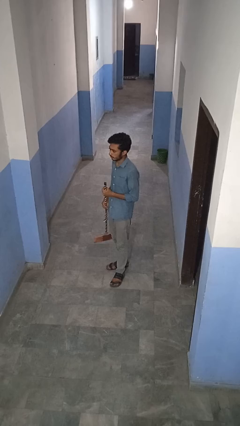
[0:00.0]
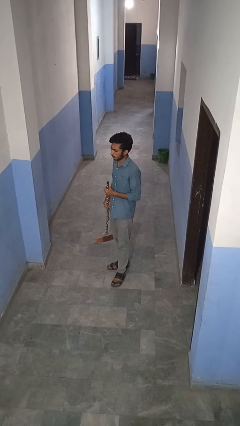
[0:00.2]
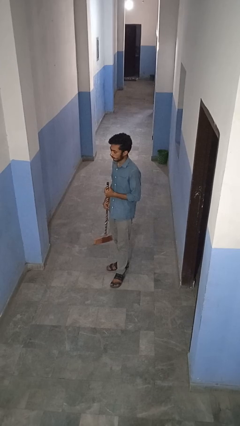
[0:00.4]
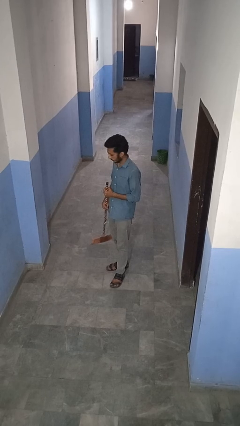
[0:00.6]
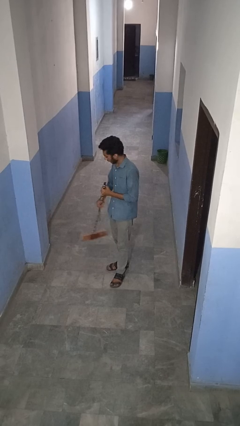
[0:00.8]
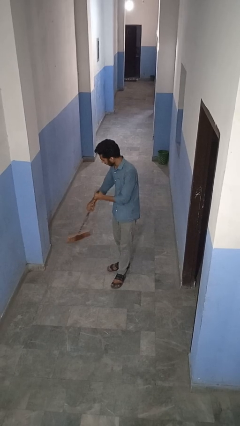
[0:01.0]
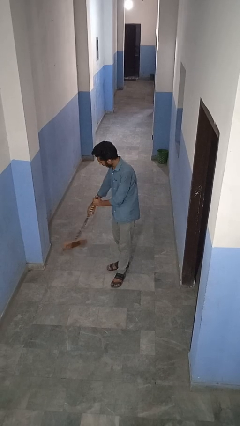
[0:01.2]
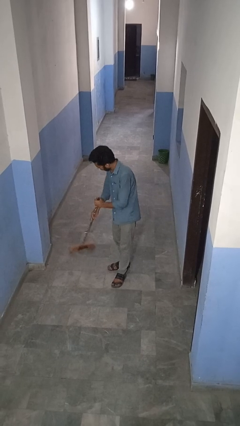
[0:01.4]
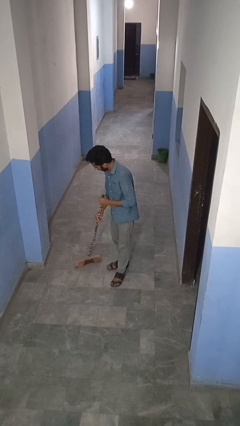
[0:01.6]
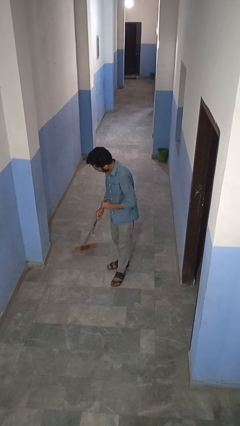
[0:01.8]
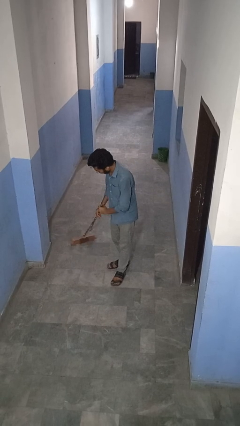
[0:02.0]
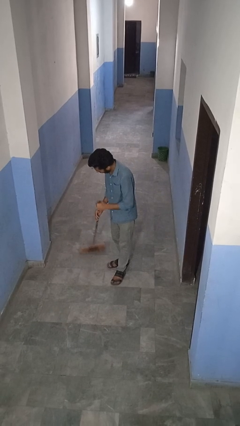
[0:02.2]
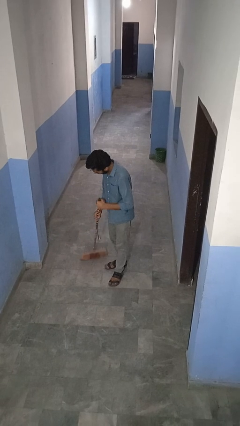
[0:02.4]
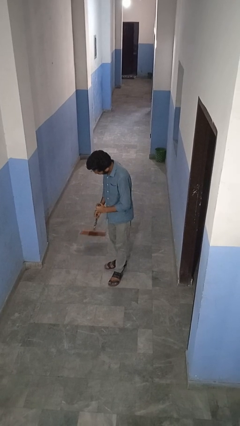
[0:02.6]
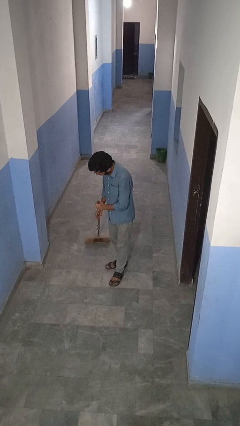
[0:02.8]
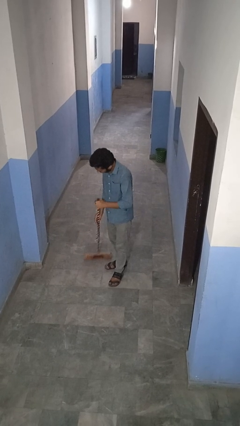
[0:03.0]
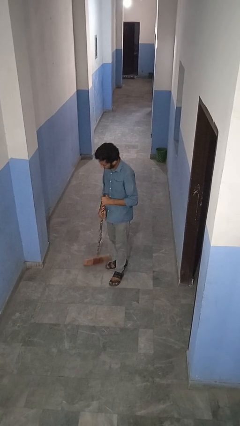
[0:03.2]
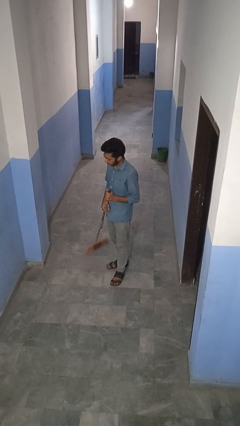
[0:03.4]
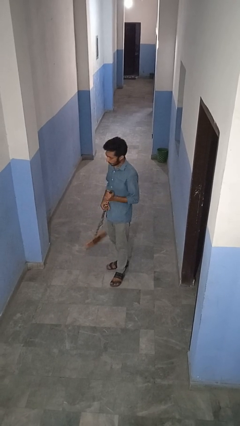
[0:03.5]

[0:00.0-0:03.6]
person sweeps floor

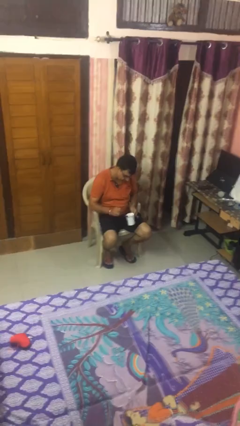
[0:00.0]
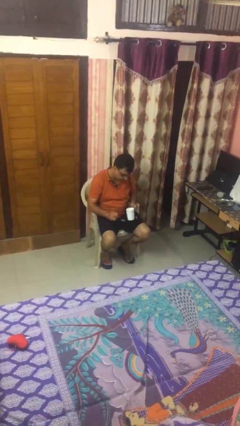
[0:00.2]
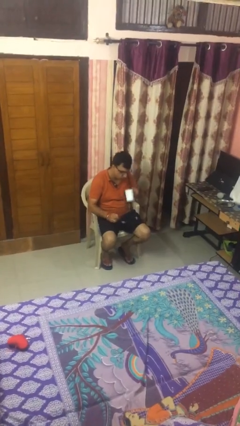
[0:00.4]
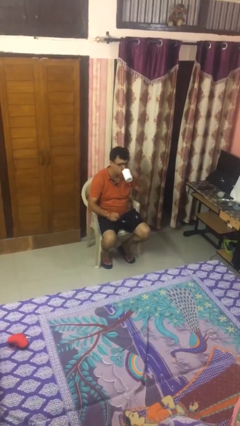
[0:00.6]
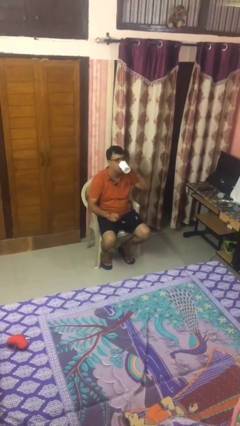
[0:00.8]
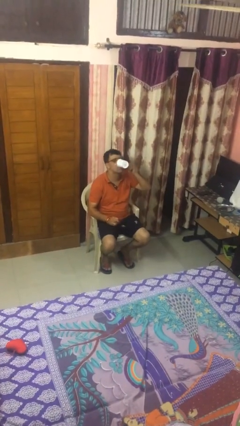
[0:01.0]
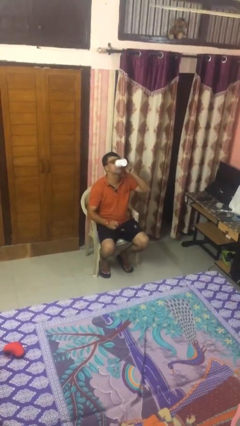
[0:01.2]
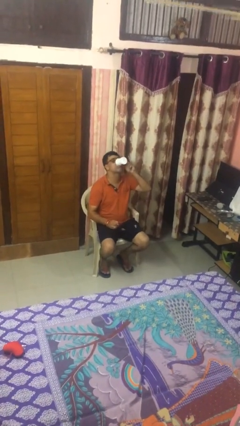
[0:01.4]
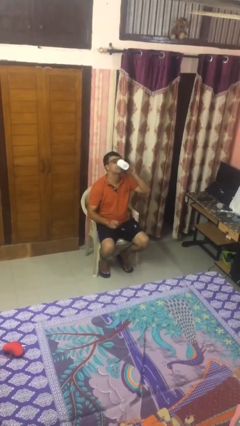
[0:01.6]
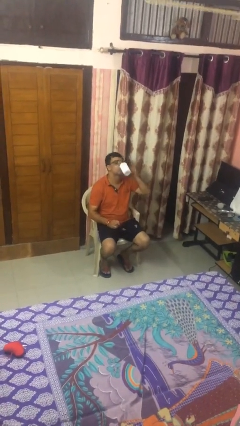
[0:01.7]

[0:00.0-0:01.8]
person drinks from mug

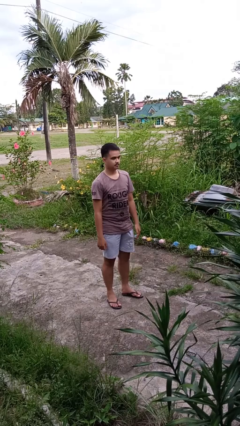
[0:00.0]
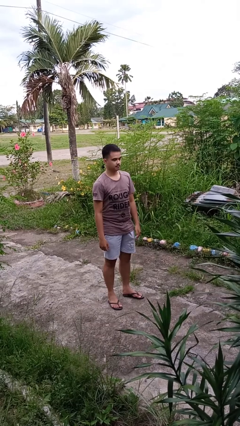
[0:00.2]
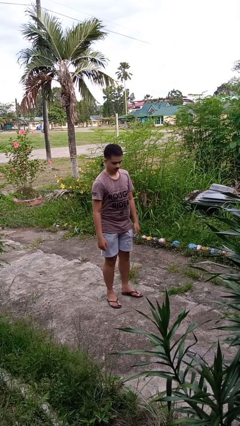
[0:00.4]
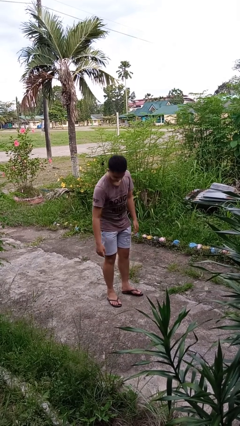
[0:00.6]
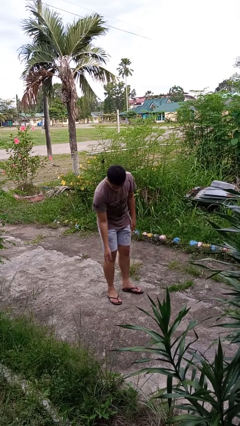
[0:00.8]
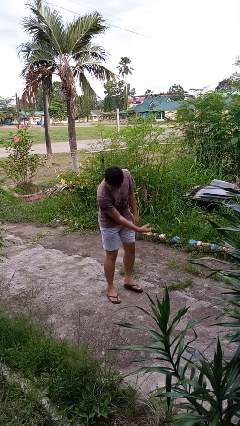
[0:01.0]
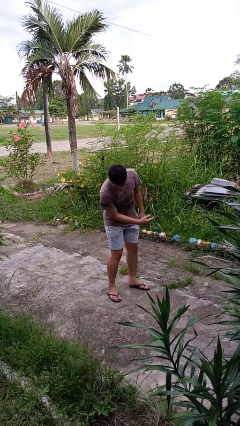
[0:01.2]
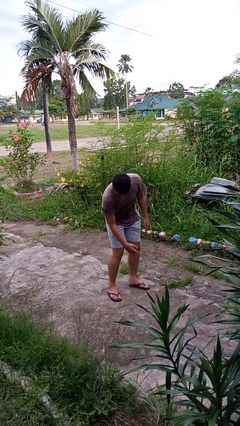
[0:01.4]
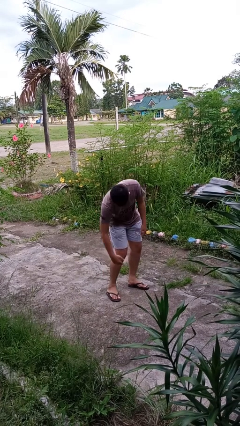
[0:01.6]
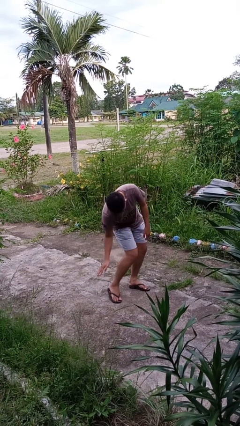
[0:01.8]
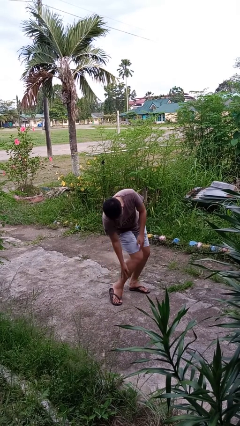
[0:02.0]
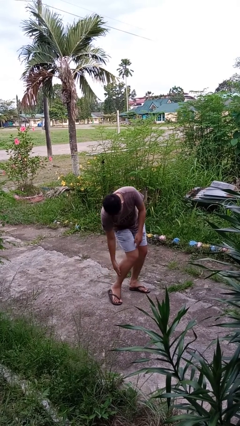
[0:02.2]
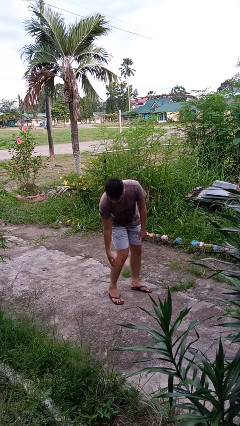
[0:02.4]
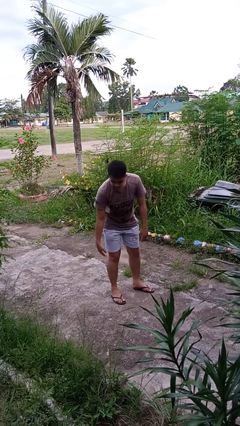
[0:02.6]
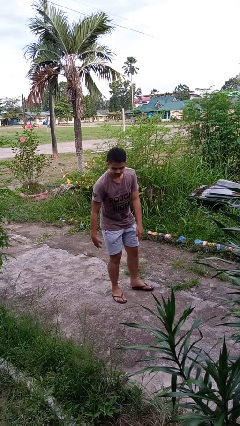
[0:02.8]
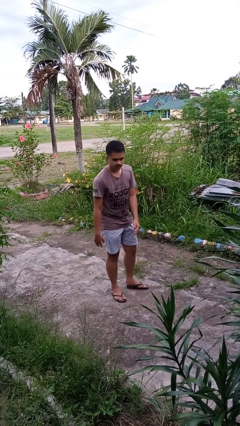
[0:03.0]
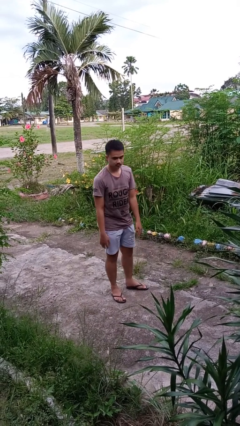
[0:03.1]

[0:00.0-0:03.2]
person swats bug

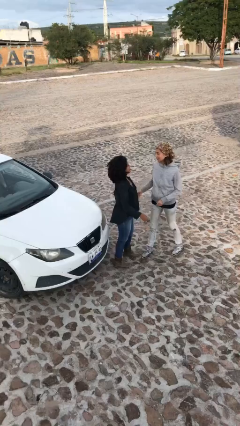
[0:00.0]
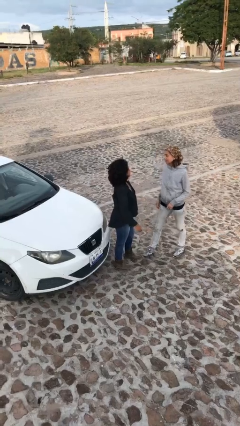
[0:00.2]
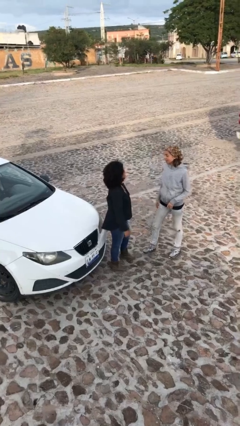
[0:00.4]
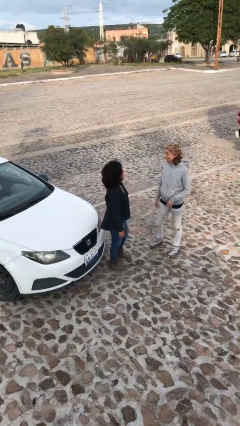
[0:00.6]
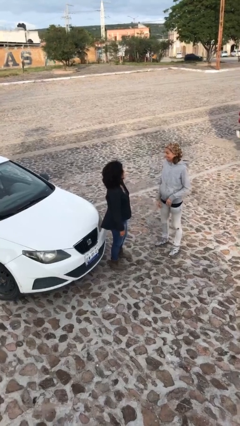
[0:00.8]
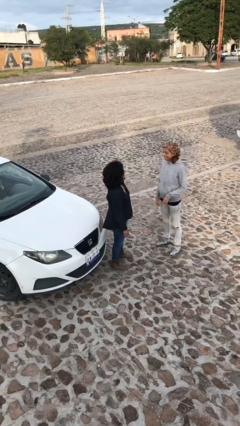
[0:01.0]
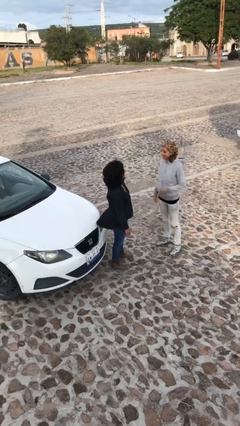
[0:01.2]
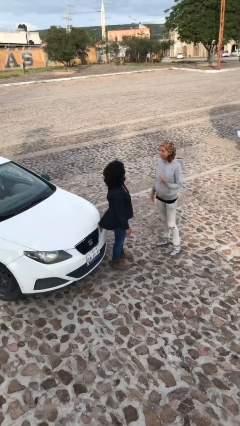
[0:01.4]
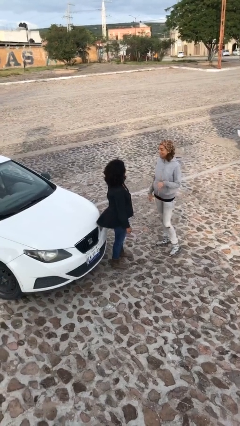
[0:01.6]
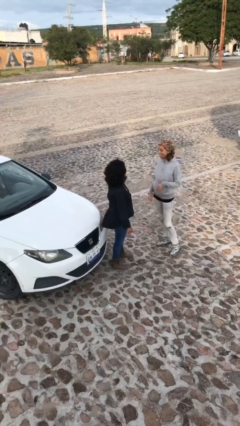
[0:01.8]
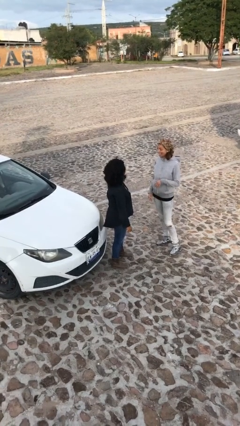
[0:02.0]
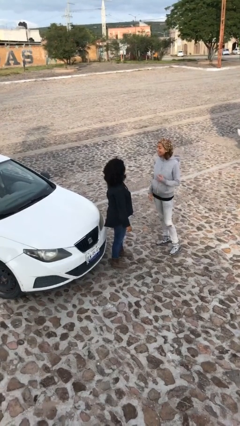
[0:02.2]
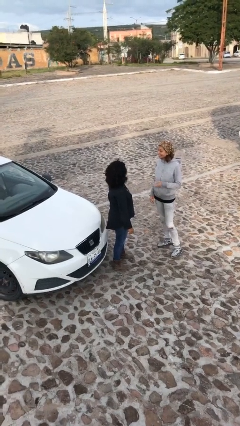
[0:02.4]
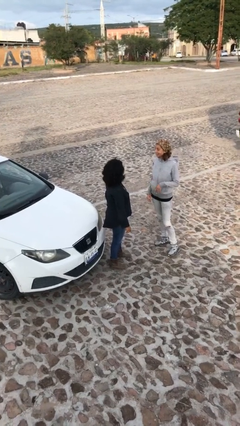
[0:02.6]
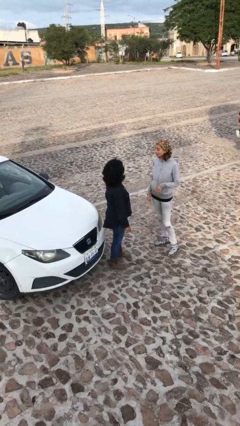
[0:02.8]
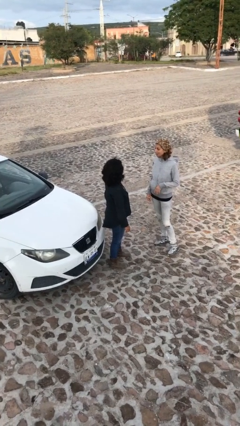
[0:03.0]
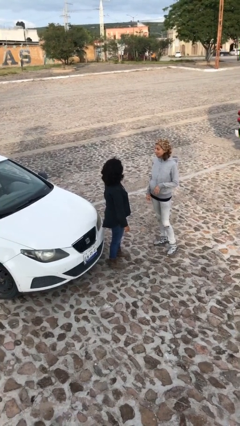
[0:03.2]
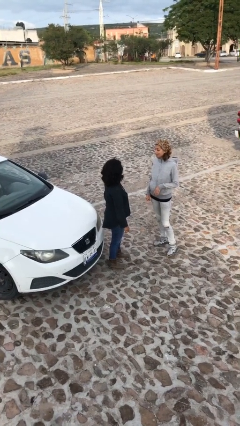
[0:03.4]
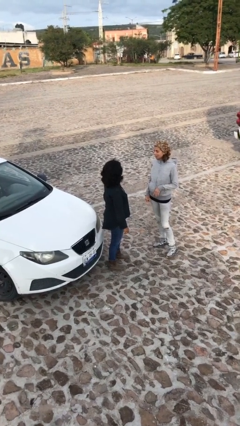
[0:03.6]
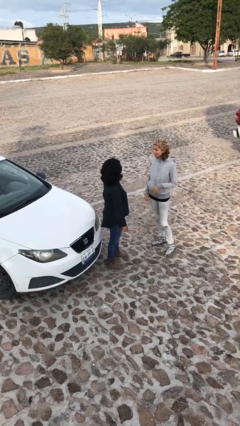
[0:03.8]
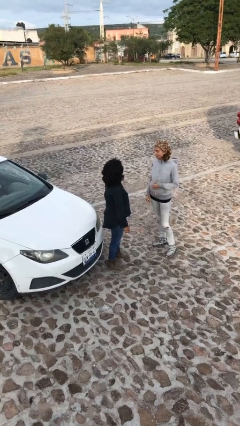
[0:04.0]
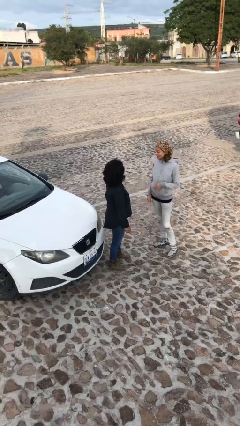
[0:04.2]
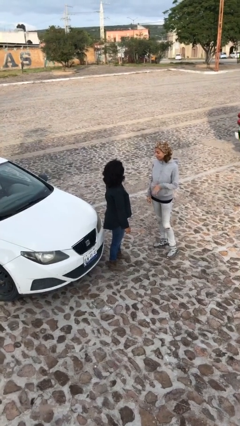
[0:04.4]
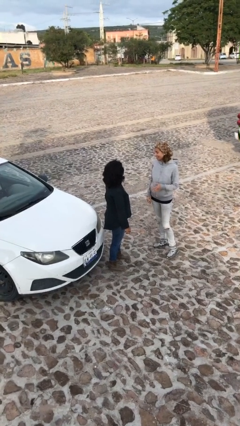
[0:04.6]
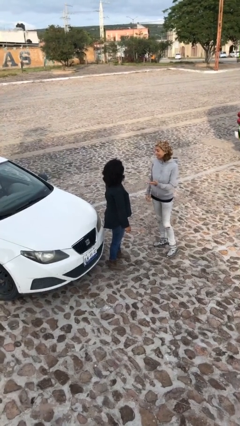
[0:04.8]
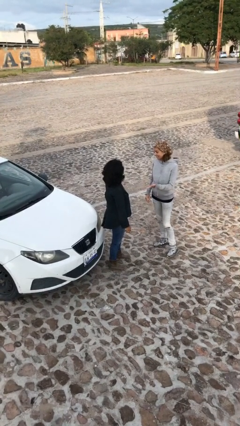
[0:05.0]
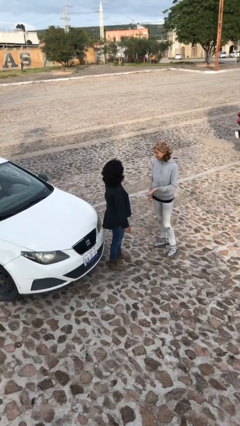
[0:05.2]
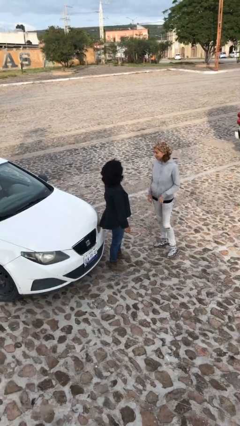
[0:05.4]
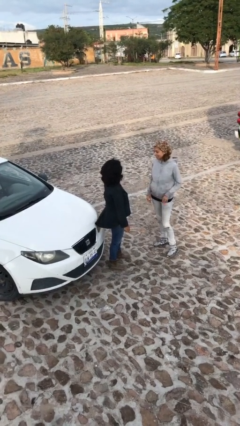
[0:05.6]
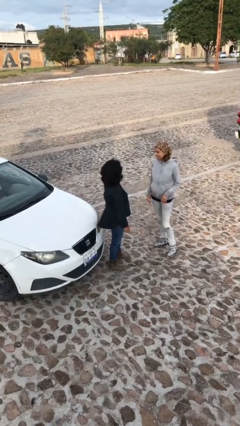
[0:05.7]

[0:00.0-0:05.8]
person talks to person

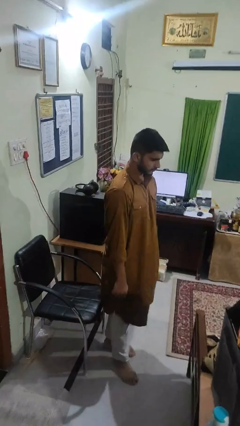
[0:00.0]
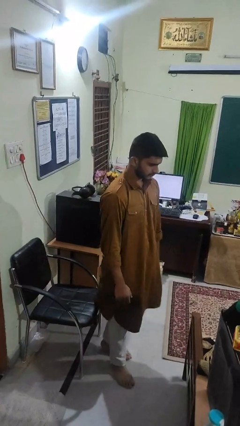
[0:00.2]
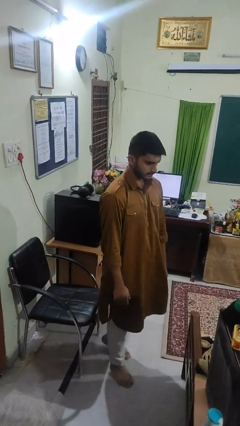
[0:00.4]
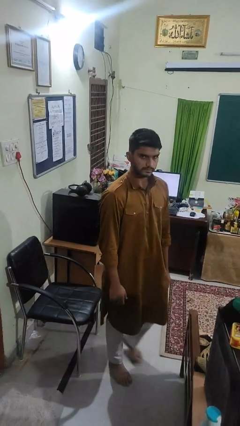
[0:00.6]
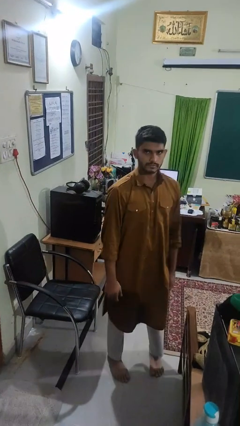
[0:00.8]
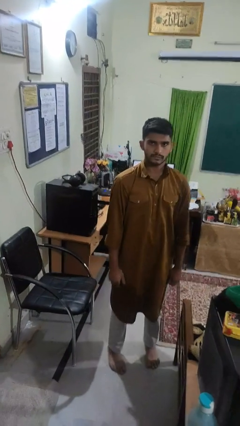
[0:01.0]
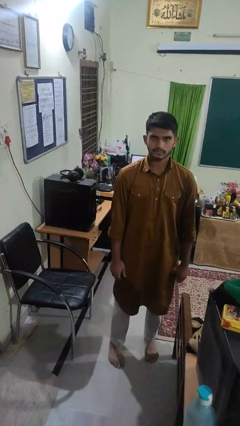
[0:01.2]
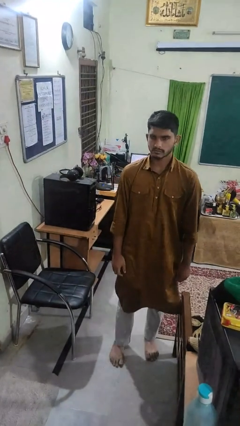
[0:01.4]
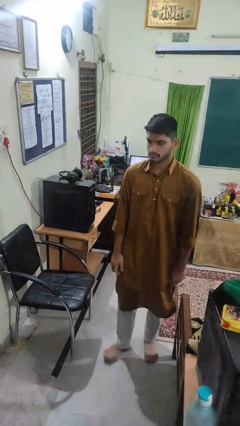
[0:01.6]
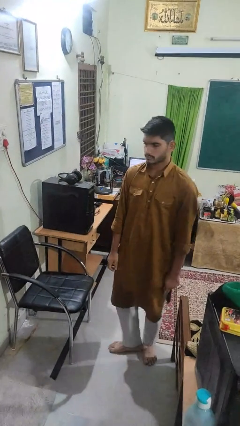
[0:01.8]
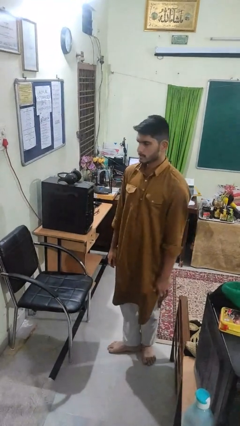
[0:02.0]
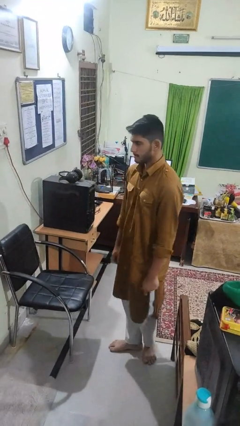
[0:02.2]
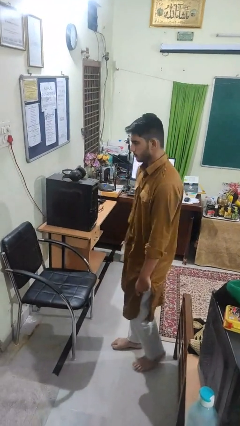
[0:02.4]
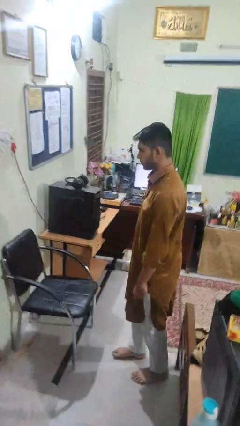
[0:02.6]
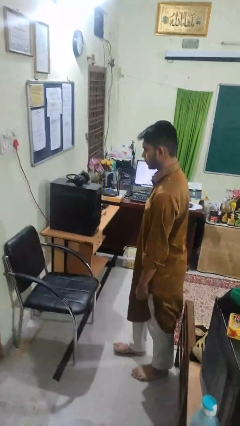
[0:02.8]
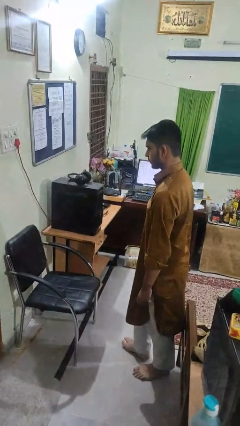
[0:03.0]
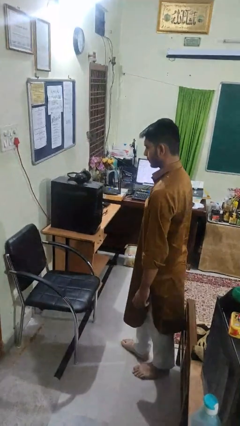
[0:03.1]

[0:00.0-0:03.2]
person climbs off chair
